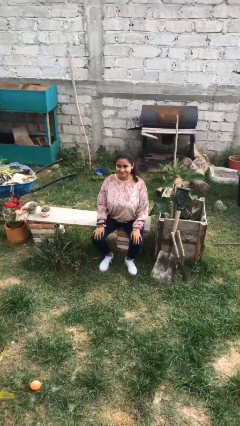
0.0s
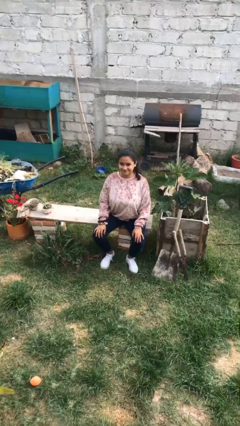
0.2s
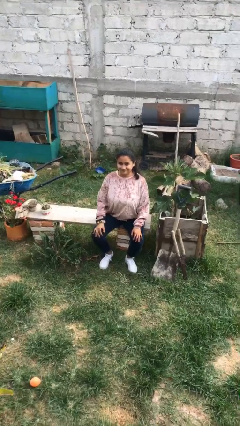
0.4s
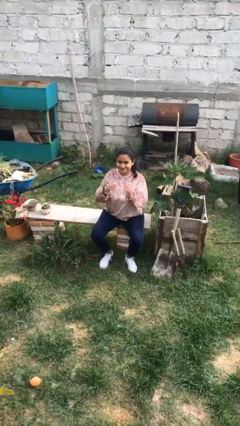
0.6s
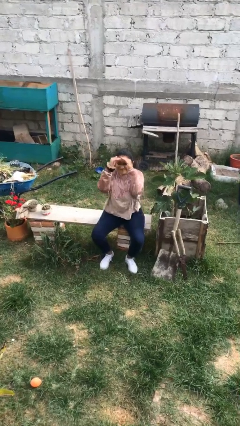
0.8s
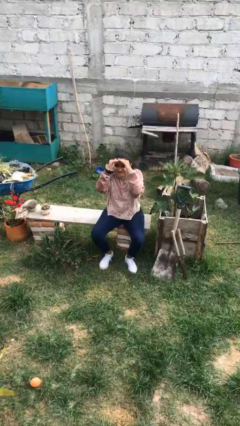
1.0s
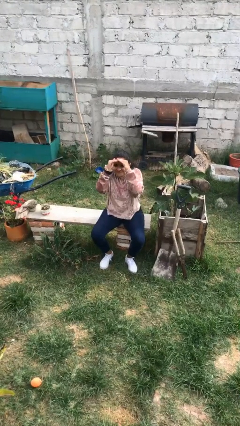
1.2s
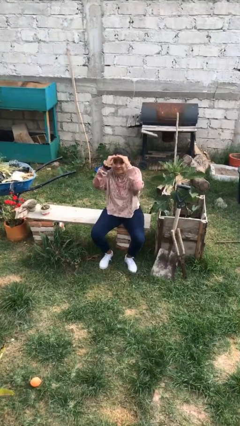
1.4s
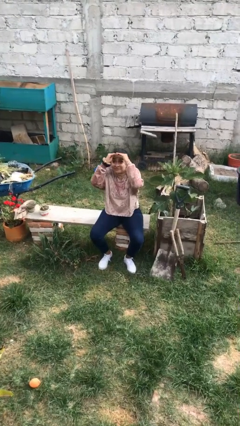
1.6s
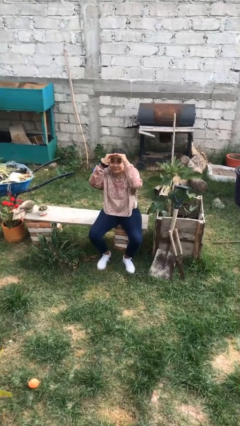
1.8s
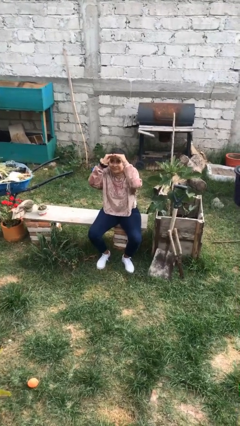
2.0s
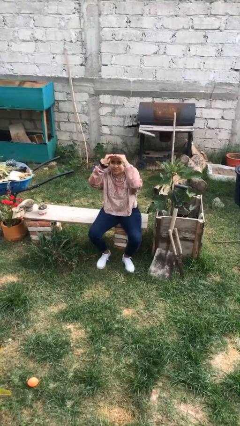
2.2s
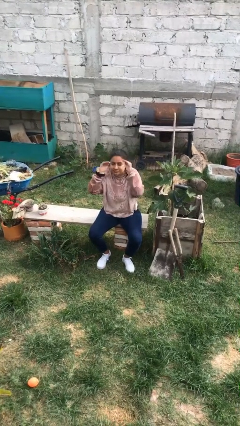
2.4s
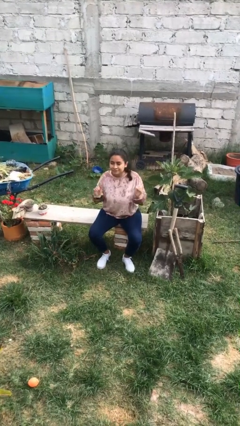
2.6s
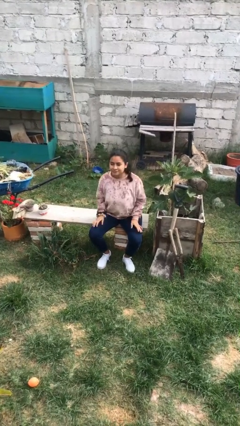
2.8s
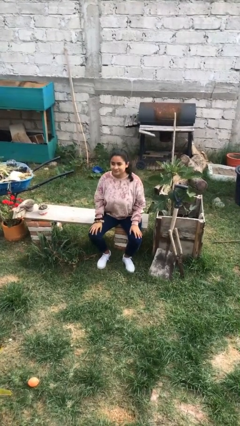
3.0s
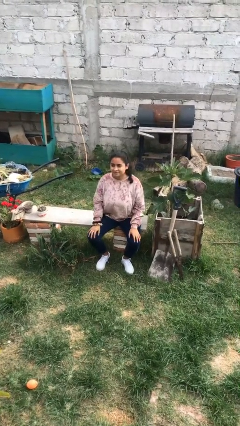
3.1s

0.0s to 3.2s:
person shades eyes

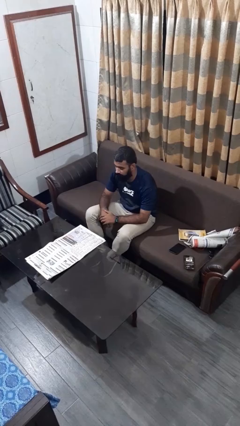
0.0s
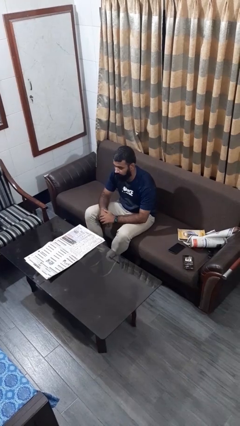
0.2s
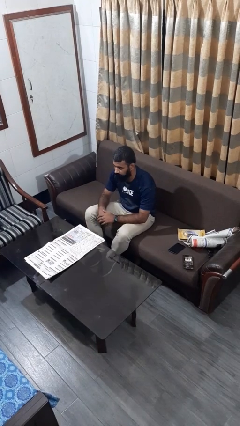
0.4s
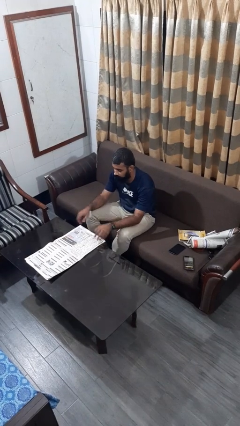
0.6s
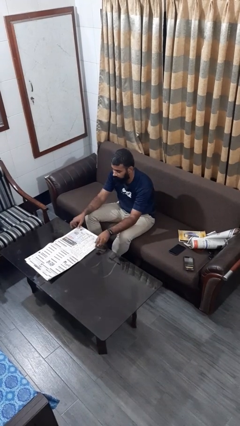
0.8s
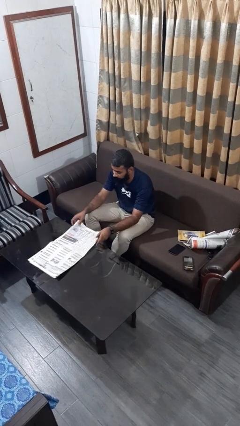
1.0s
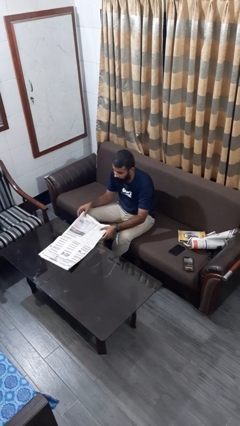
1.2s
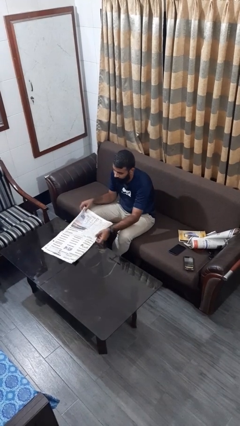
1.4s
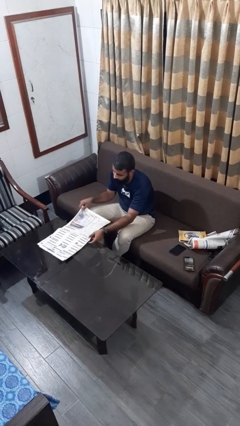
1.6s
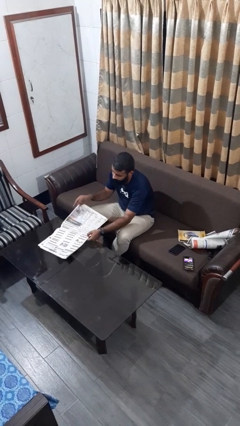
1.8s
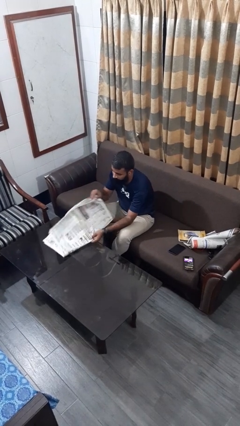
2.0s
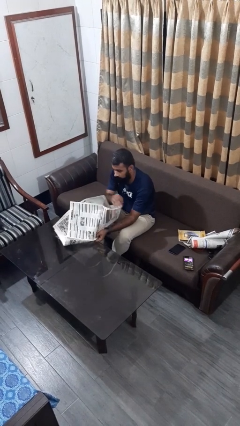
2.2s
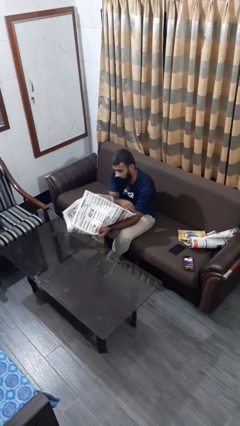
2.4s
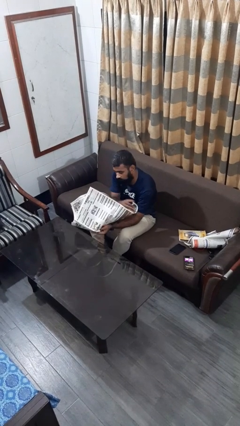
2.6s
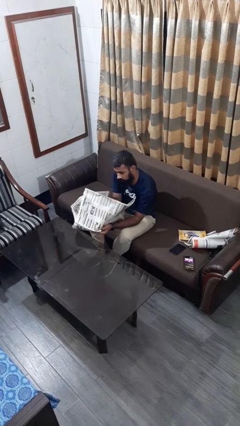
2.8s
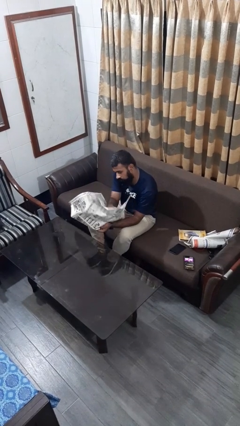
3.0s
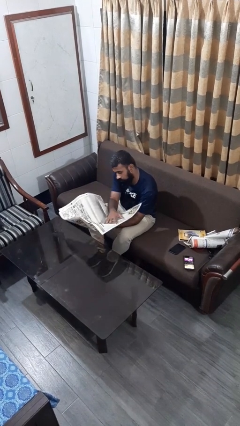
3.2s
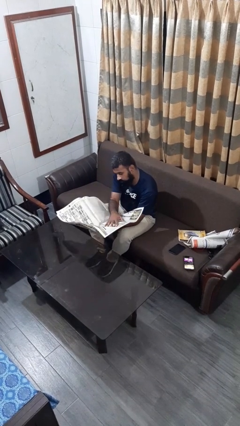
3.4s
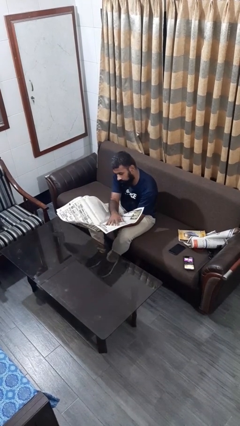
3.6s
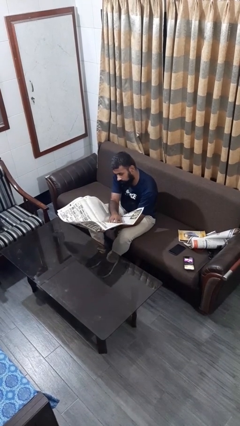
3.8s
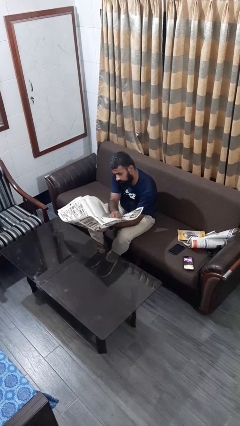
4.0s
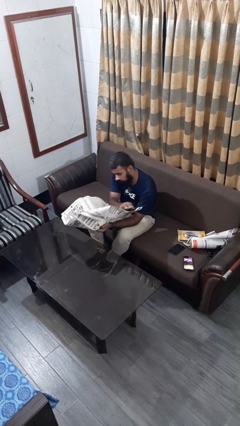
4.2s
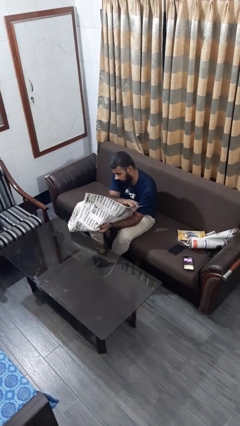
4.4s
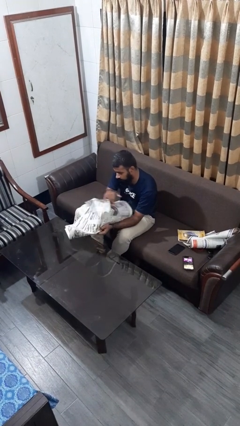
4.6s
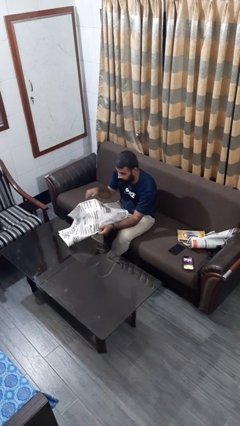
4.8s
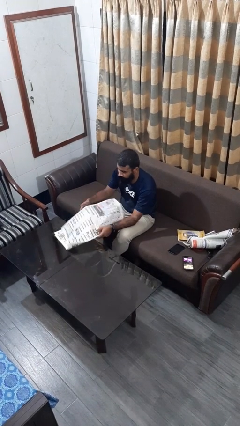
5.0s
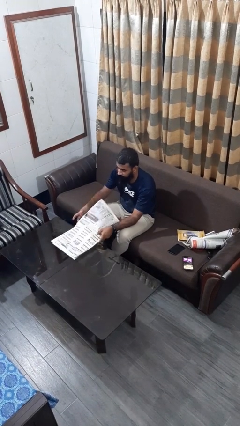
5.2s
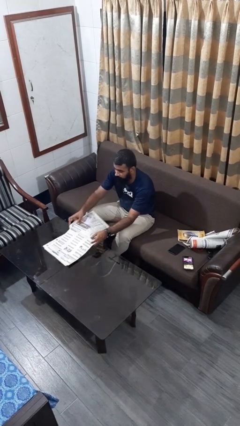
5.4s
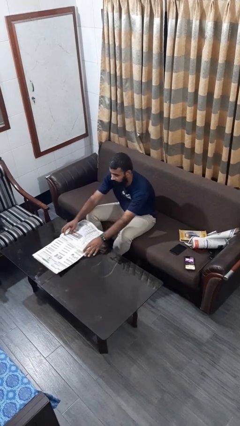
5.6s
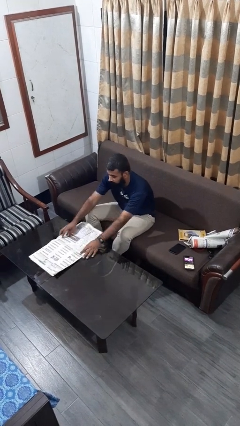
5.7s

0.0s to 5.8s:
person reads newspaper

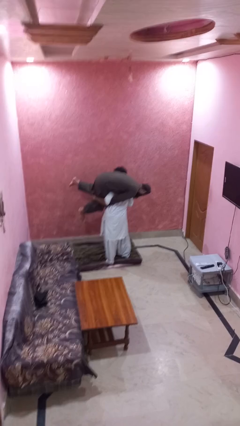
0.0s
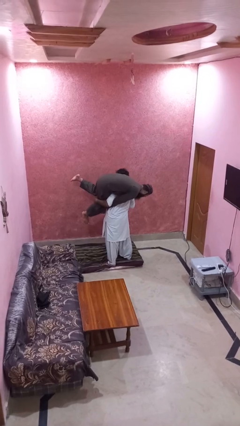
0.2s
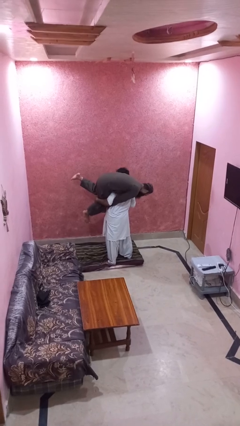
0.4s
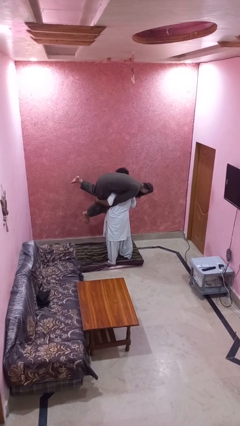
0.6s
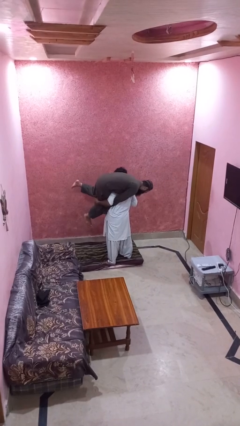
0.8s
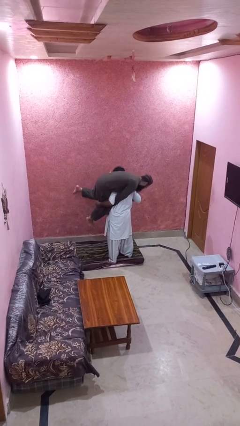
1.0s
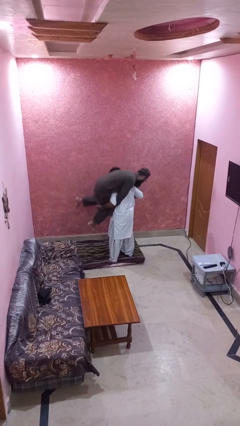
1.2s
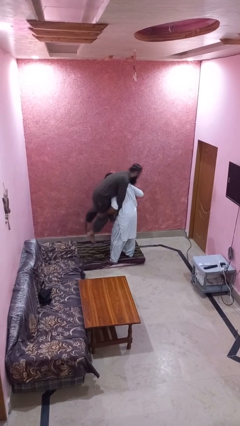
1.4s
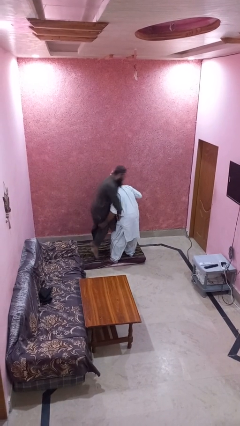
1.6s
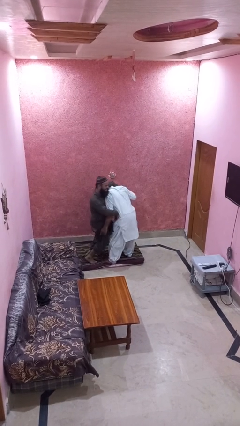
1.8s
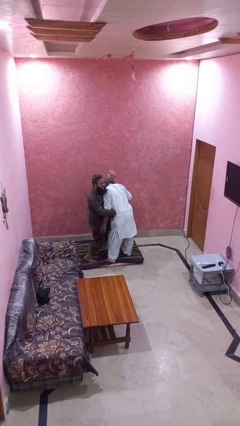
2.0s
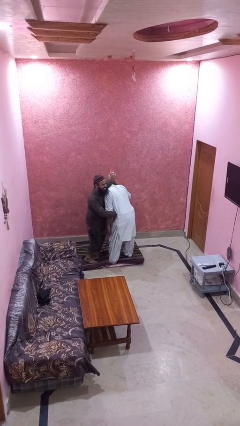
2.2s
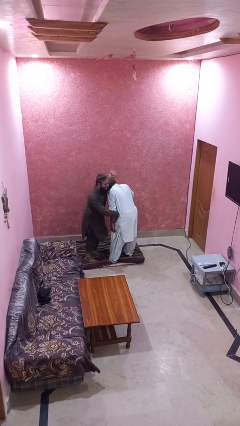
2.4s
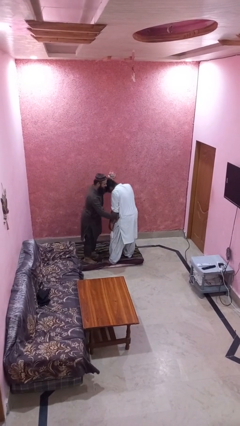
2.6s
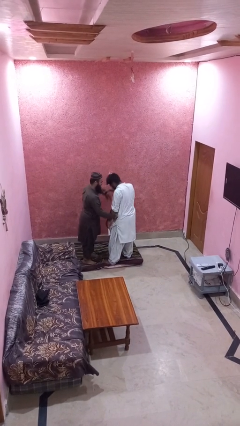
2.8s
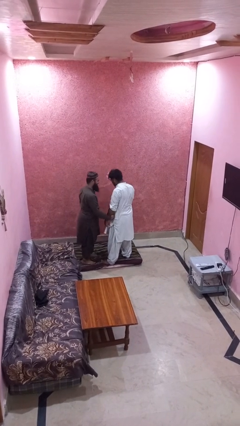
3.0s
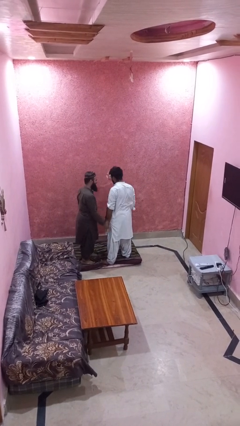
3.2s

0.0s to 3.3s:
person puts down person

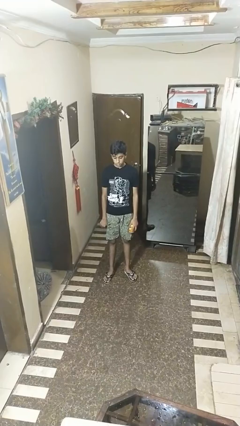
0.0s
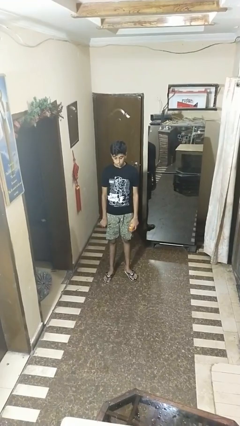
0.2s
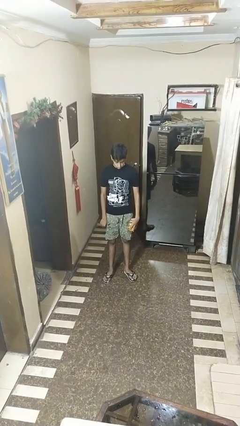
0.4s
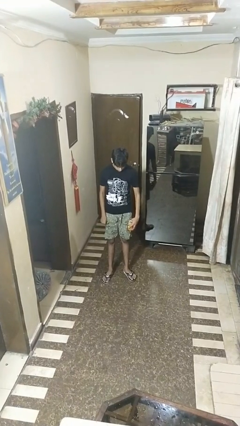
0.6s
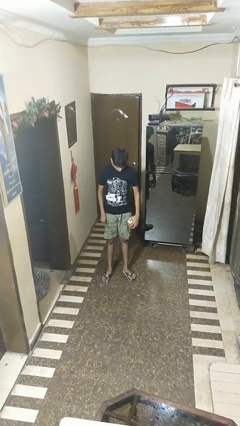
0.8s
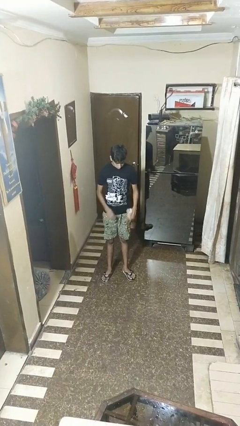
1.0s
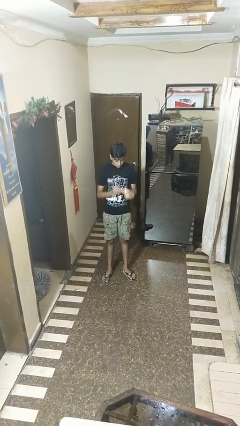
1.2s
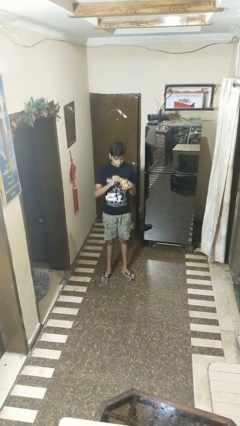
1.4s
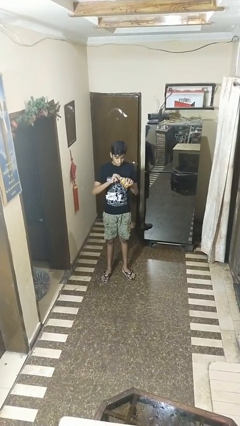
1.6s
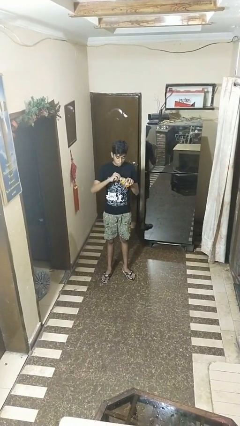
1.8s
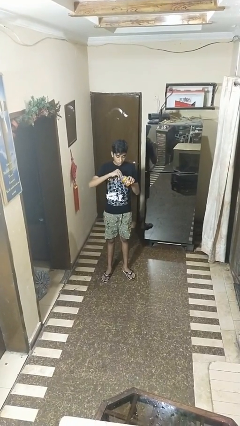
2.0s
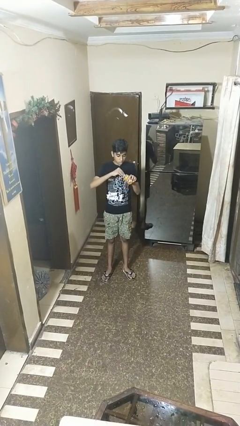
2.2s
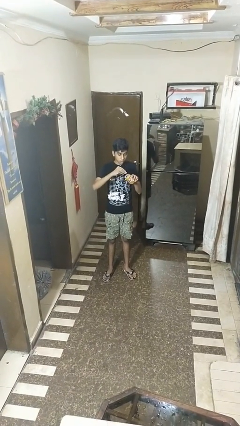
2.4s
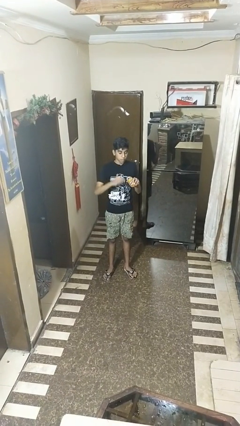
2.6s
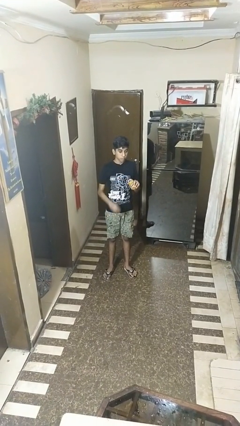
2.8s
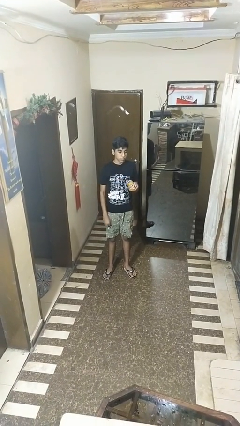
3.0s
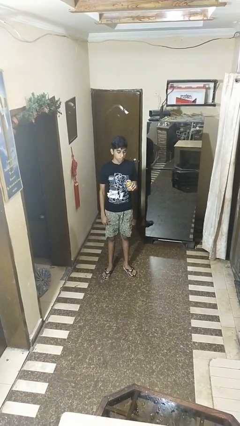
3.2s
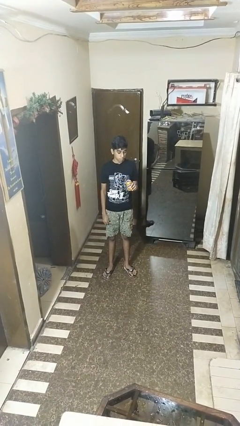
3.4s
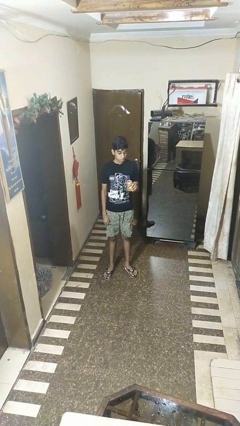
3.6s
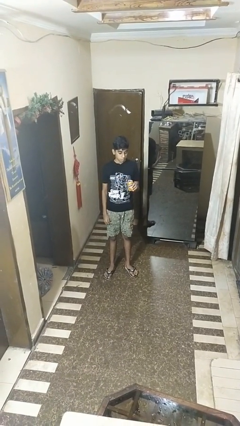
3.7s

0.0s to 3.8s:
person opens beverage can

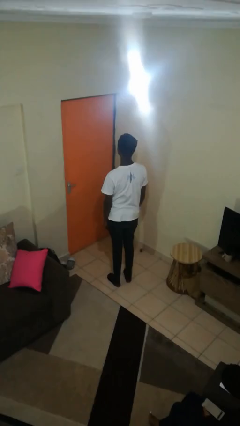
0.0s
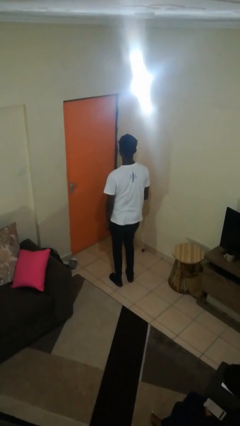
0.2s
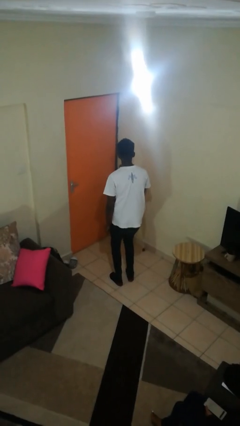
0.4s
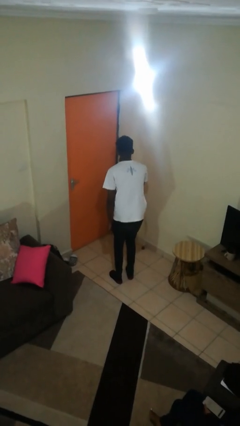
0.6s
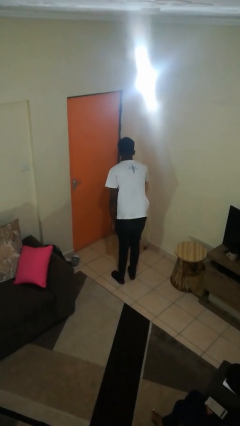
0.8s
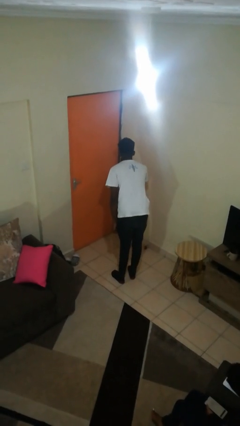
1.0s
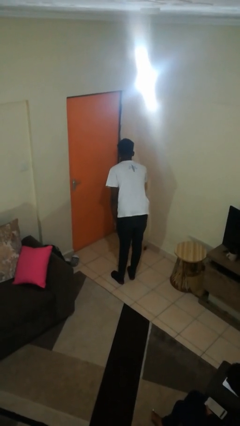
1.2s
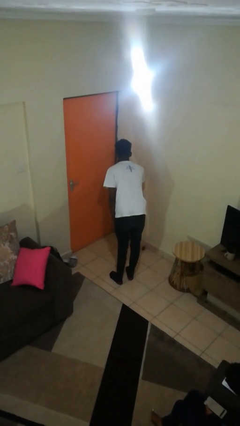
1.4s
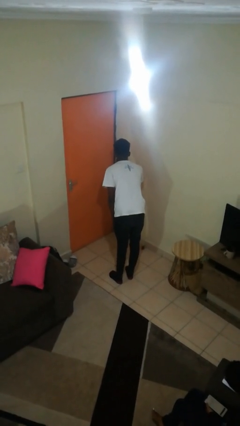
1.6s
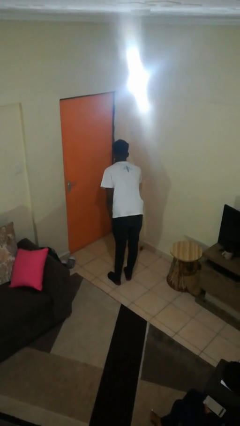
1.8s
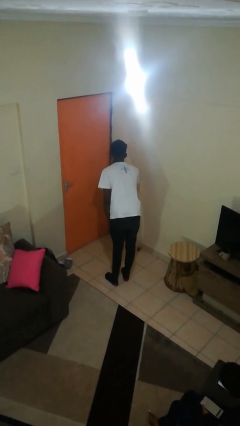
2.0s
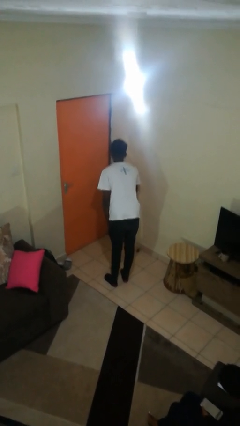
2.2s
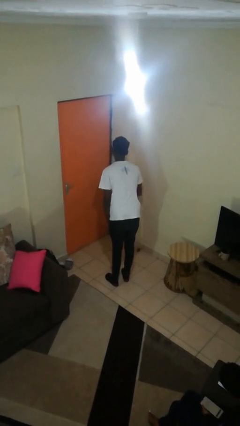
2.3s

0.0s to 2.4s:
person gestures be quiet
